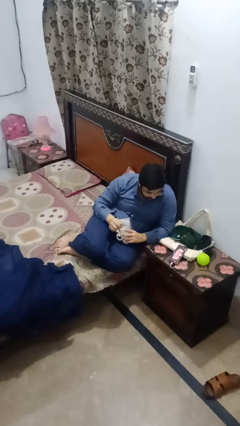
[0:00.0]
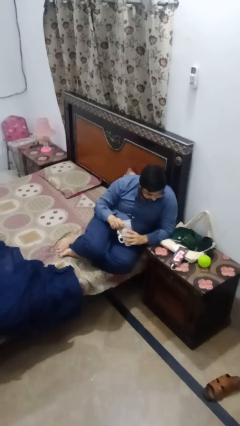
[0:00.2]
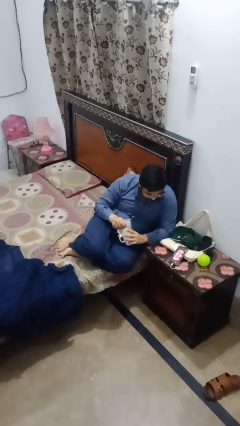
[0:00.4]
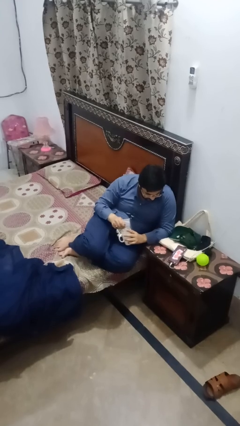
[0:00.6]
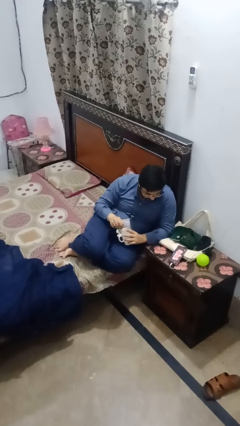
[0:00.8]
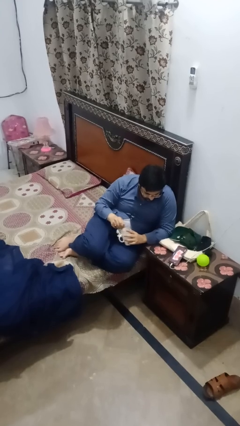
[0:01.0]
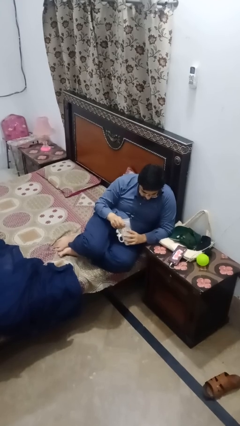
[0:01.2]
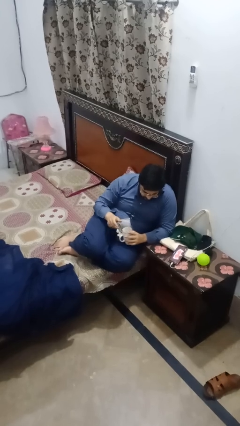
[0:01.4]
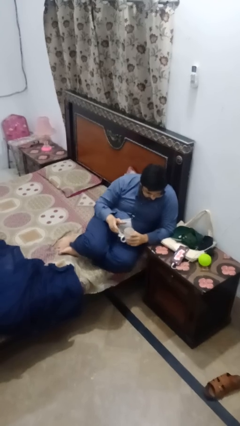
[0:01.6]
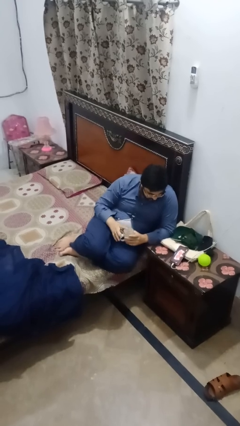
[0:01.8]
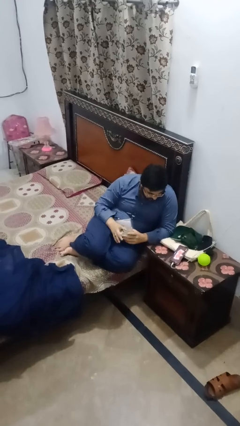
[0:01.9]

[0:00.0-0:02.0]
person stirs mug

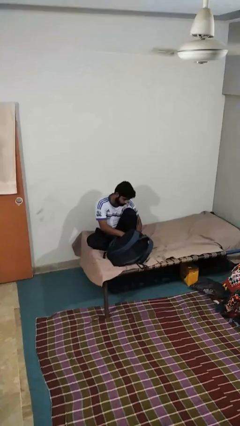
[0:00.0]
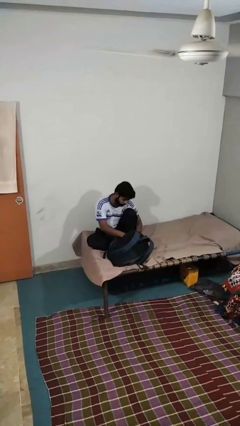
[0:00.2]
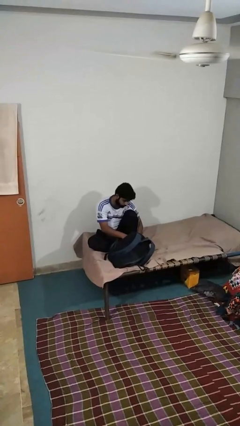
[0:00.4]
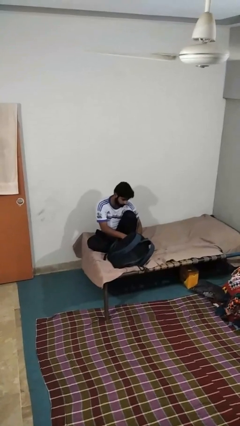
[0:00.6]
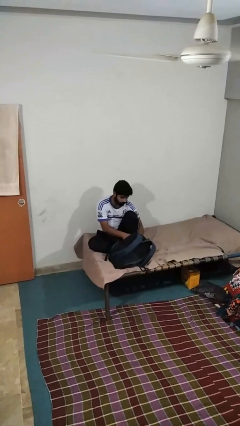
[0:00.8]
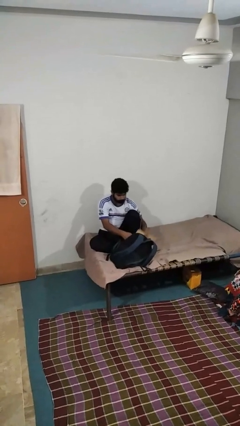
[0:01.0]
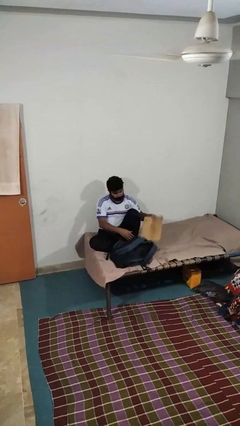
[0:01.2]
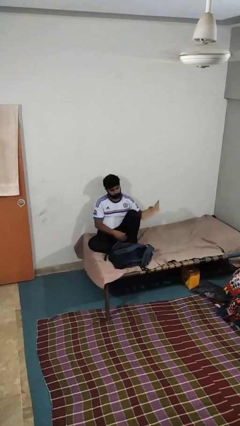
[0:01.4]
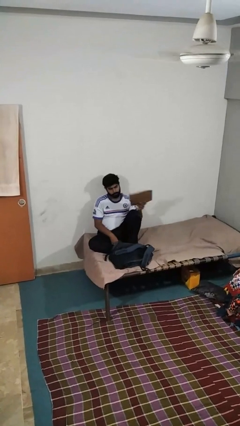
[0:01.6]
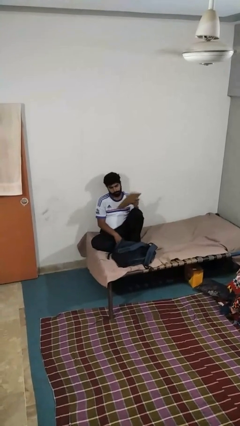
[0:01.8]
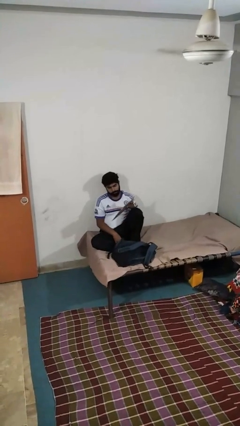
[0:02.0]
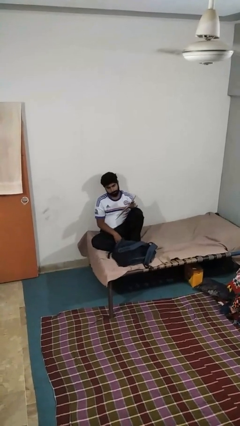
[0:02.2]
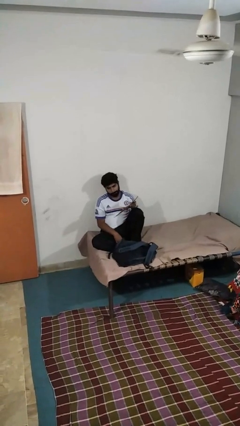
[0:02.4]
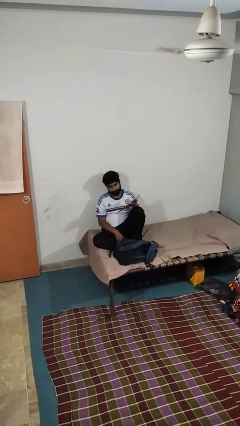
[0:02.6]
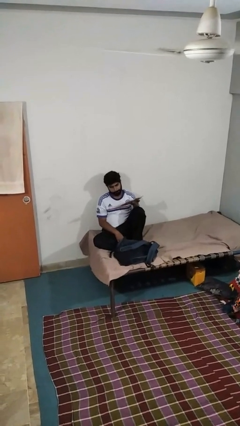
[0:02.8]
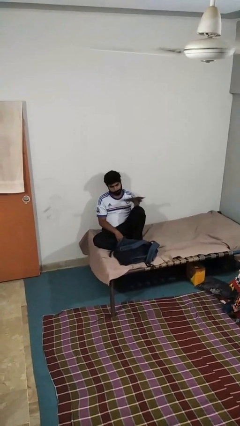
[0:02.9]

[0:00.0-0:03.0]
person takes object from backpack

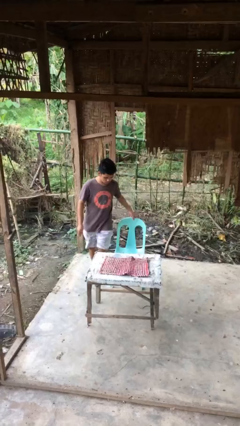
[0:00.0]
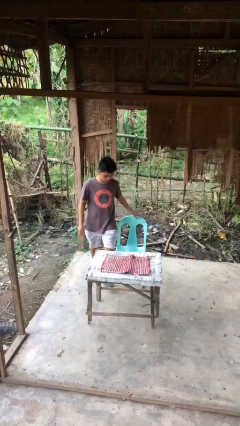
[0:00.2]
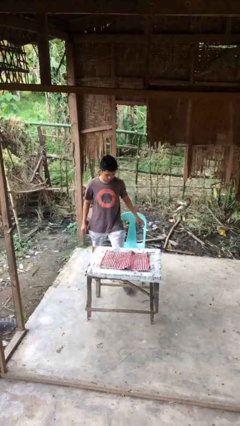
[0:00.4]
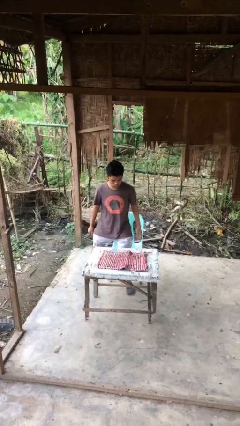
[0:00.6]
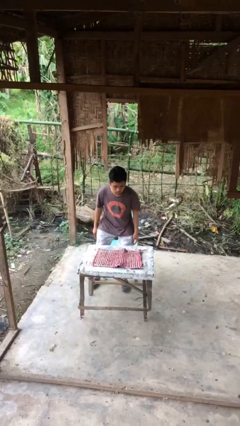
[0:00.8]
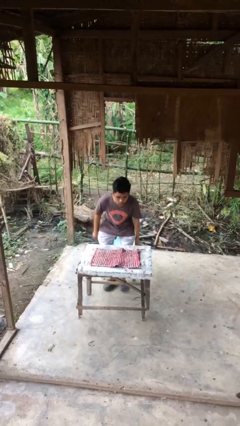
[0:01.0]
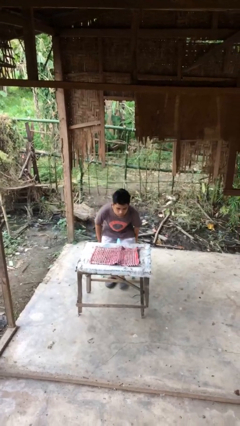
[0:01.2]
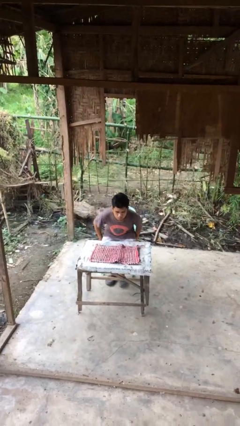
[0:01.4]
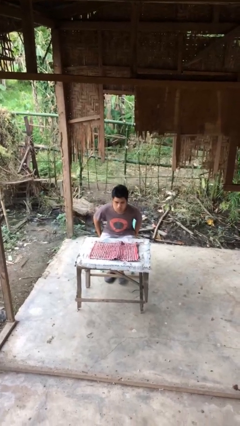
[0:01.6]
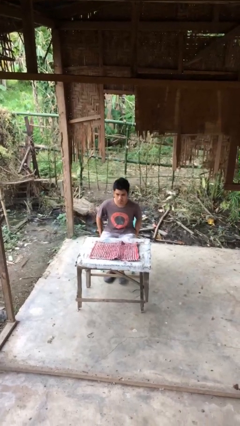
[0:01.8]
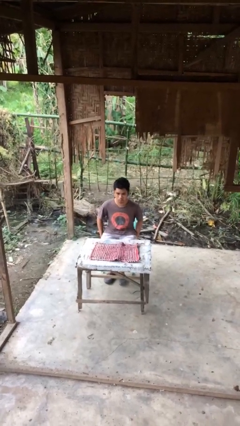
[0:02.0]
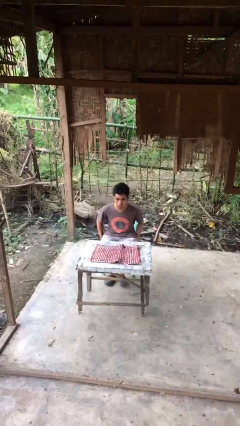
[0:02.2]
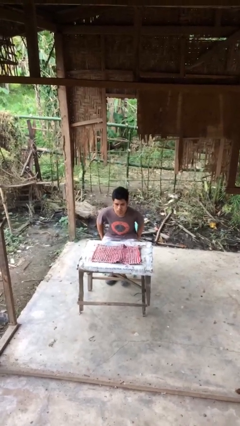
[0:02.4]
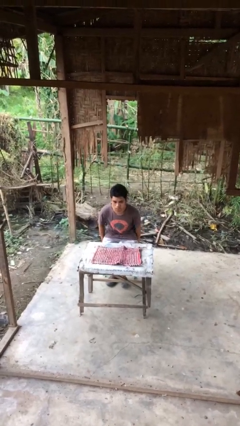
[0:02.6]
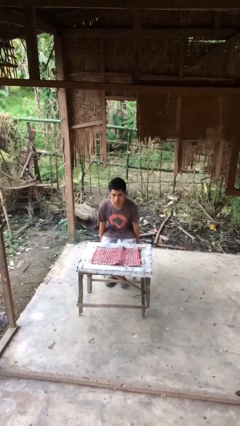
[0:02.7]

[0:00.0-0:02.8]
person sits down

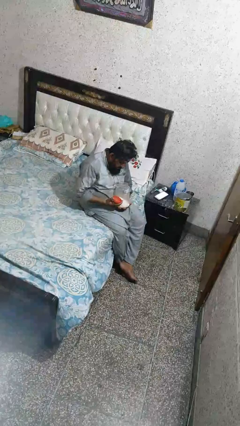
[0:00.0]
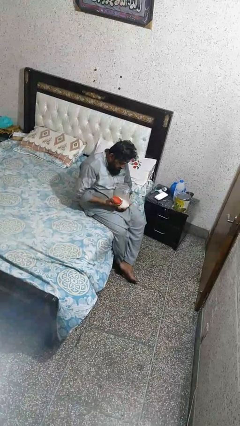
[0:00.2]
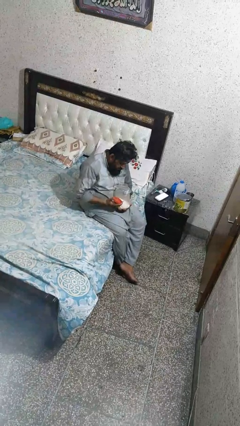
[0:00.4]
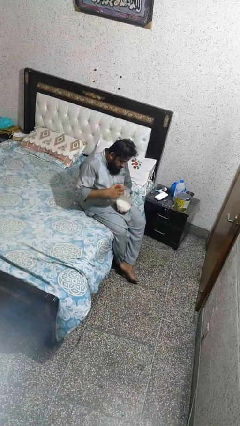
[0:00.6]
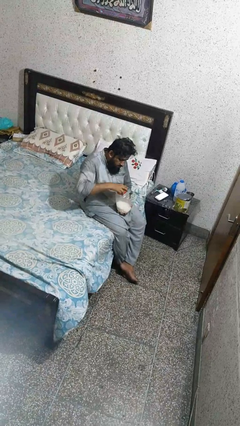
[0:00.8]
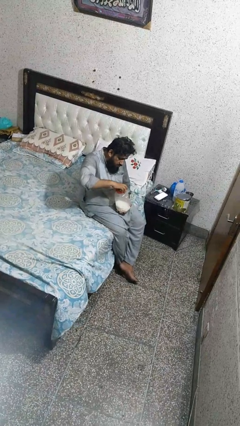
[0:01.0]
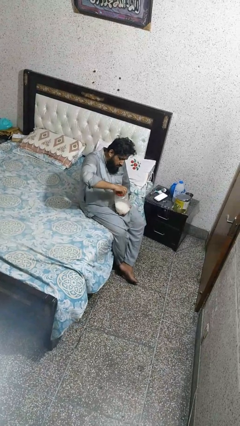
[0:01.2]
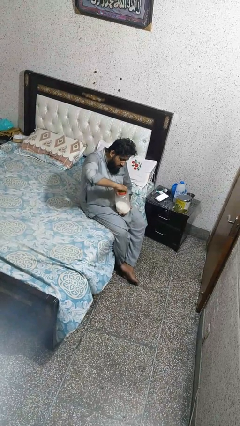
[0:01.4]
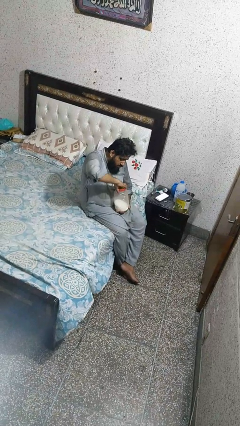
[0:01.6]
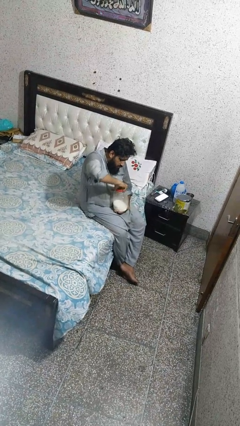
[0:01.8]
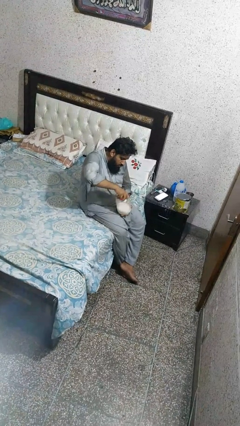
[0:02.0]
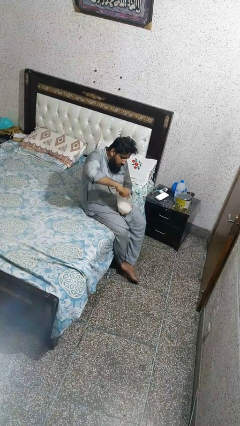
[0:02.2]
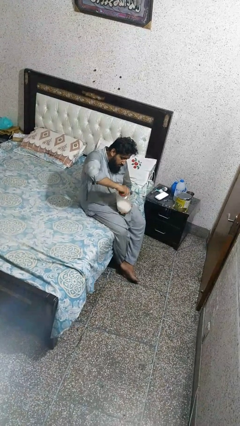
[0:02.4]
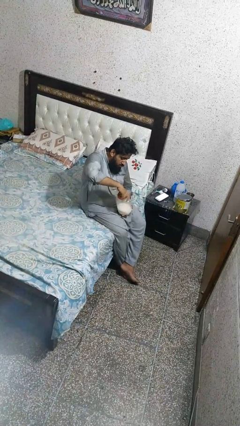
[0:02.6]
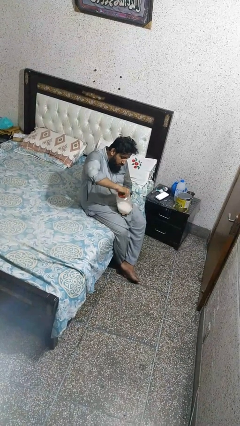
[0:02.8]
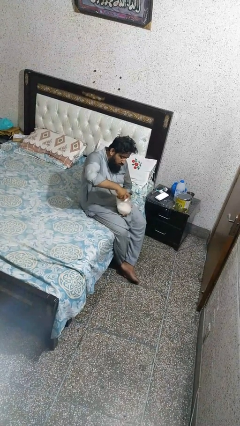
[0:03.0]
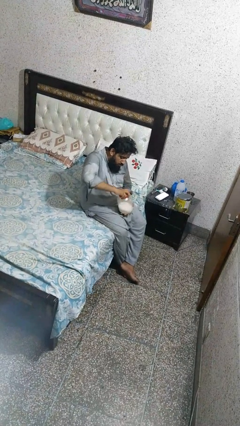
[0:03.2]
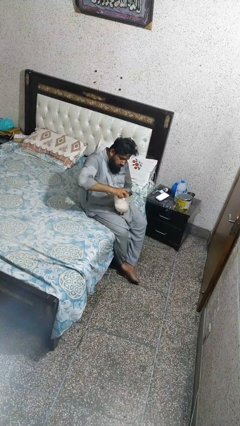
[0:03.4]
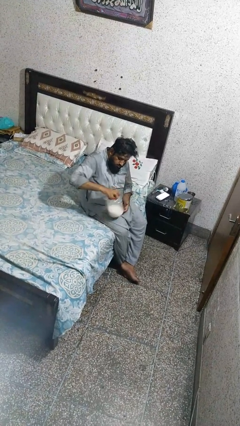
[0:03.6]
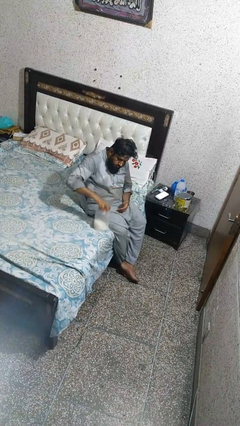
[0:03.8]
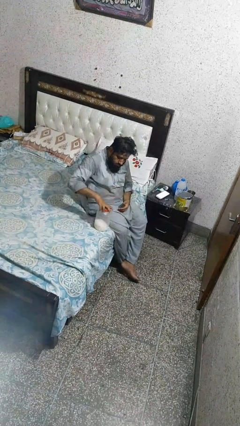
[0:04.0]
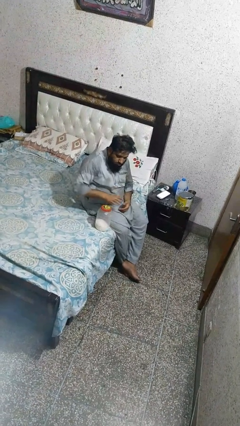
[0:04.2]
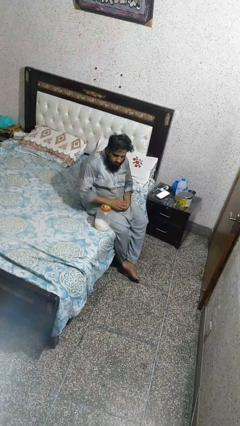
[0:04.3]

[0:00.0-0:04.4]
person closes jar

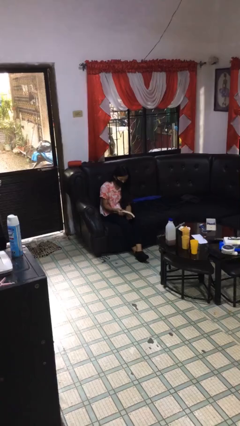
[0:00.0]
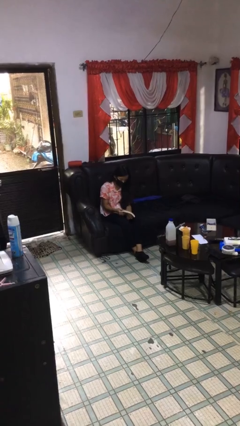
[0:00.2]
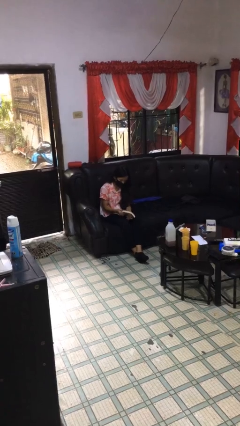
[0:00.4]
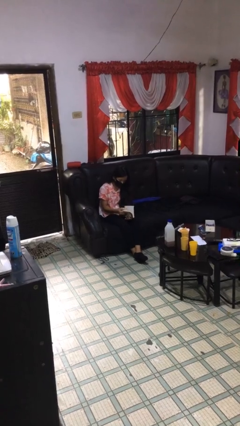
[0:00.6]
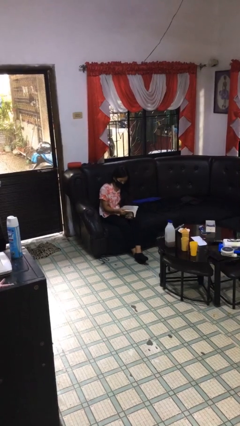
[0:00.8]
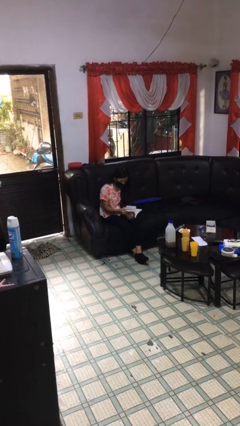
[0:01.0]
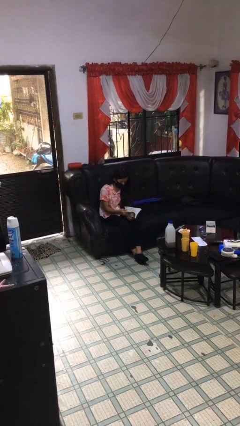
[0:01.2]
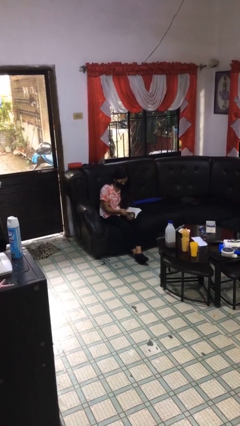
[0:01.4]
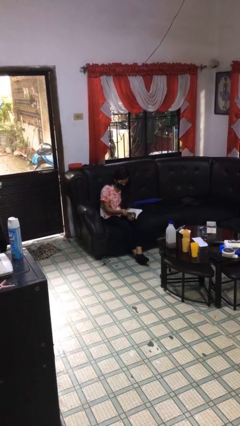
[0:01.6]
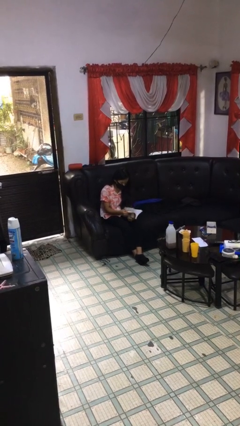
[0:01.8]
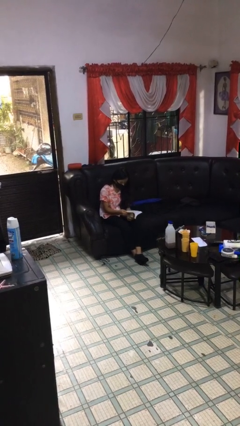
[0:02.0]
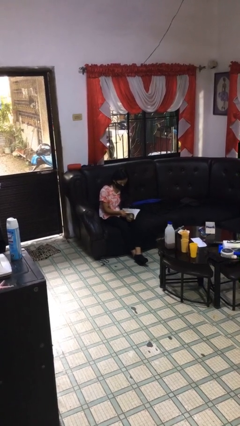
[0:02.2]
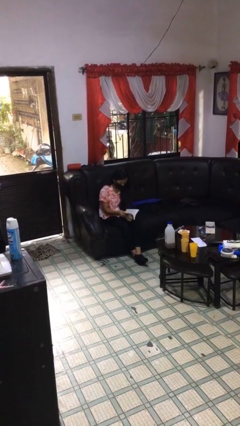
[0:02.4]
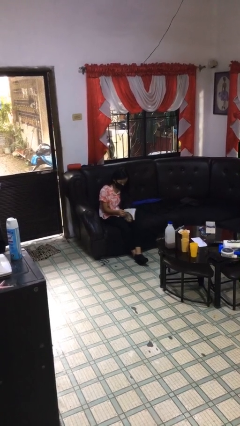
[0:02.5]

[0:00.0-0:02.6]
person reads document

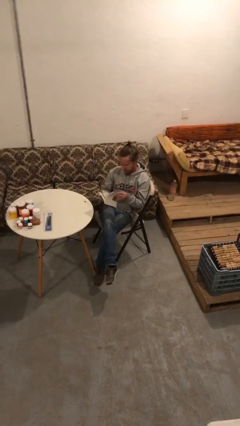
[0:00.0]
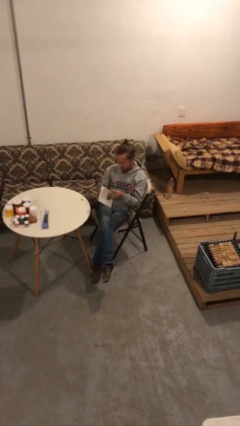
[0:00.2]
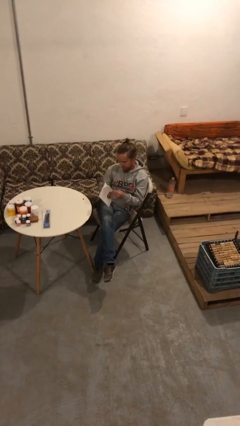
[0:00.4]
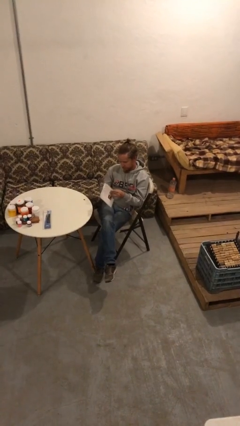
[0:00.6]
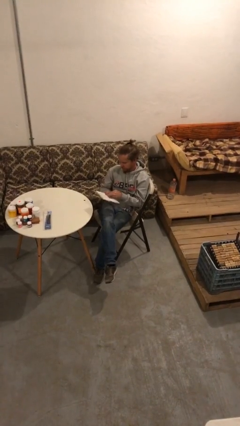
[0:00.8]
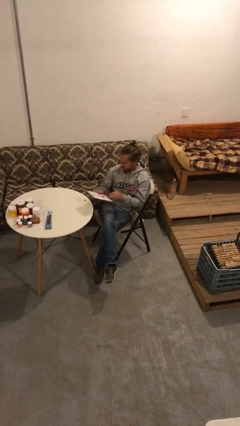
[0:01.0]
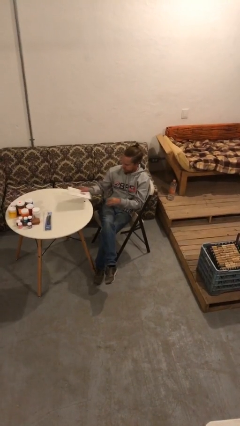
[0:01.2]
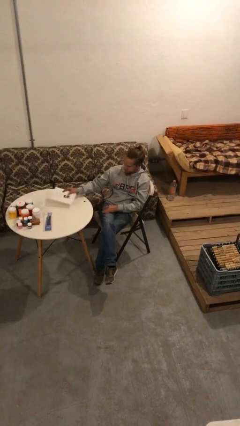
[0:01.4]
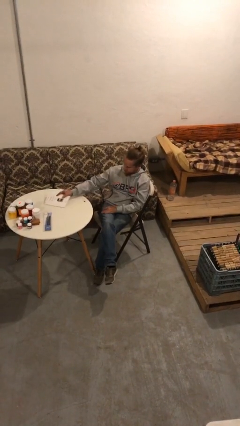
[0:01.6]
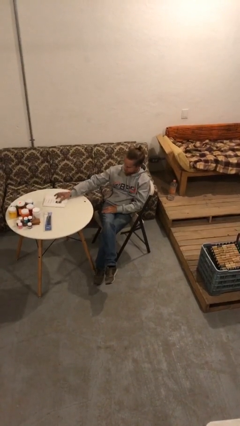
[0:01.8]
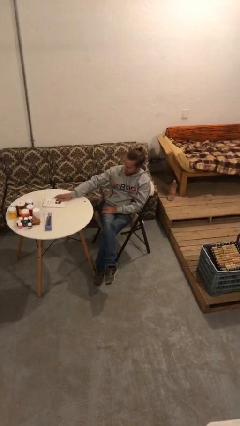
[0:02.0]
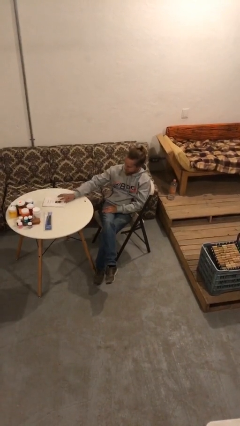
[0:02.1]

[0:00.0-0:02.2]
person puts down object on table

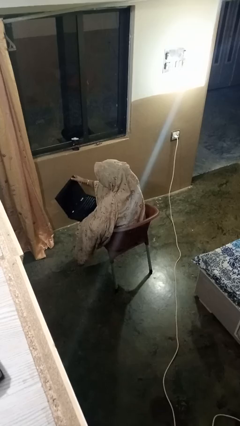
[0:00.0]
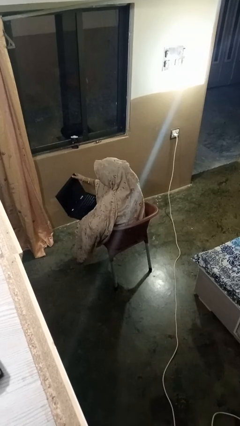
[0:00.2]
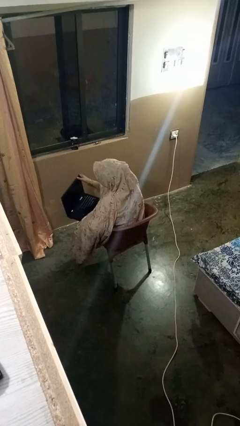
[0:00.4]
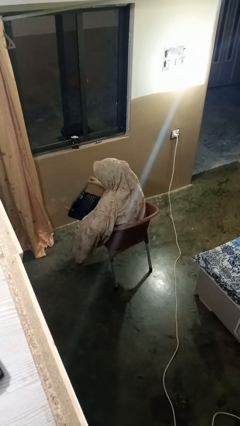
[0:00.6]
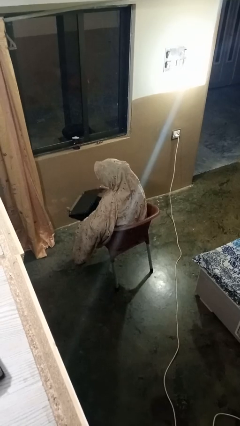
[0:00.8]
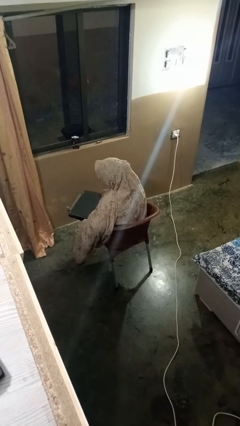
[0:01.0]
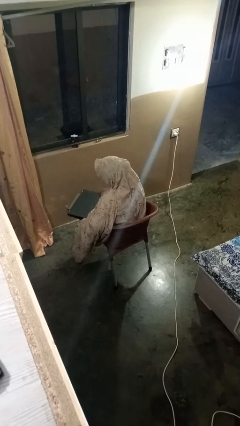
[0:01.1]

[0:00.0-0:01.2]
person closes laptop
